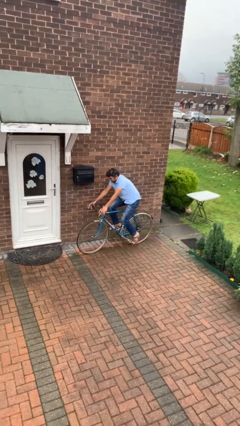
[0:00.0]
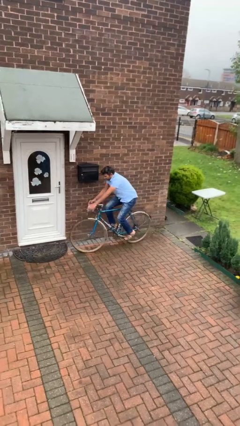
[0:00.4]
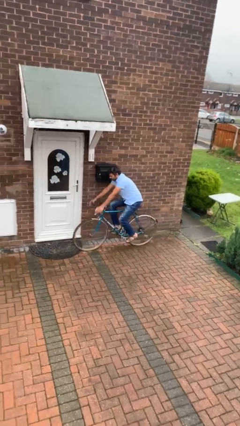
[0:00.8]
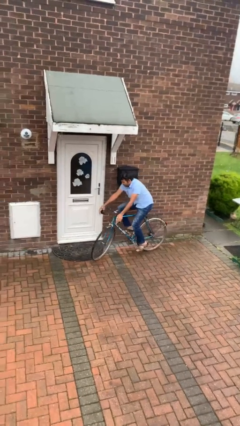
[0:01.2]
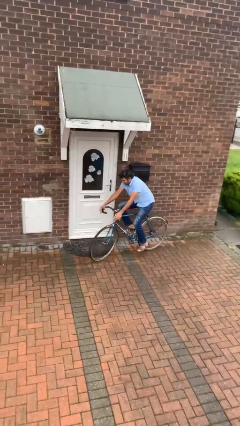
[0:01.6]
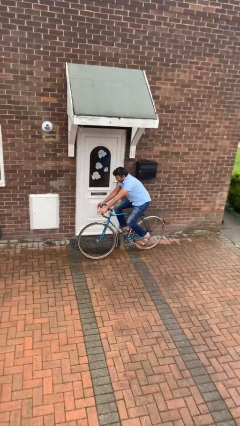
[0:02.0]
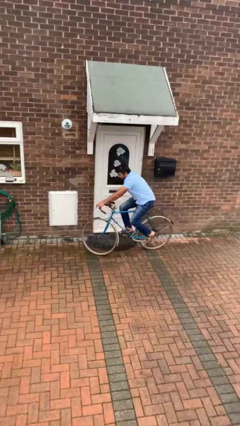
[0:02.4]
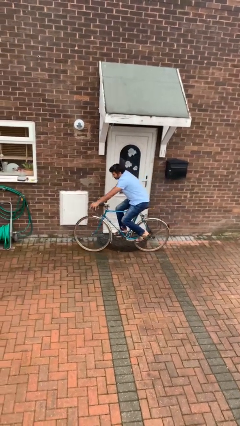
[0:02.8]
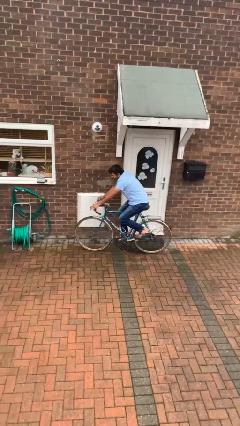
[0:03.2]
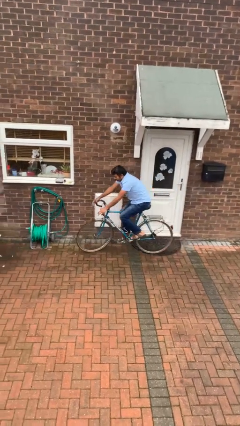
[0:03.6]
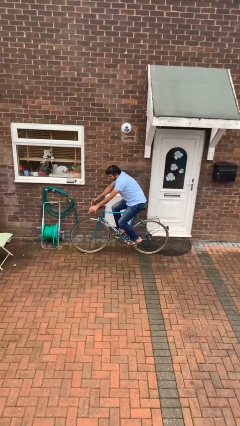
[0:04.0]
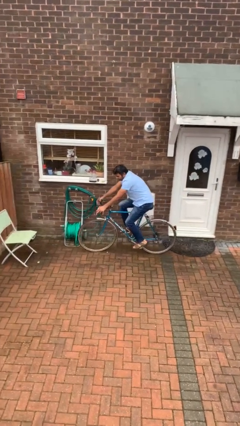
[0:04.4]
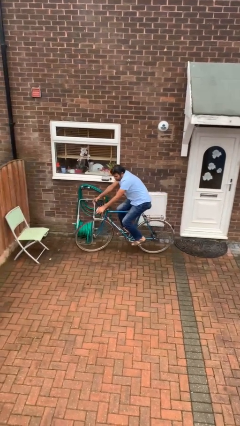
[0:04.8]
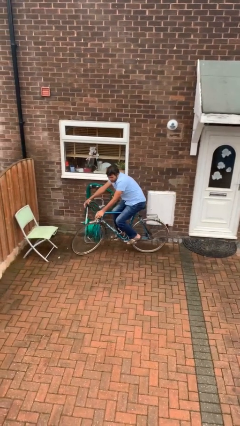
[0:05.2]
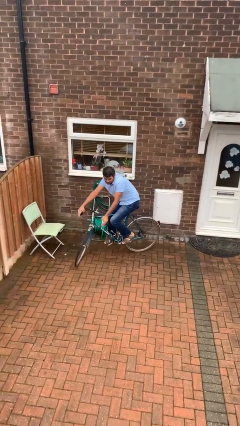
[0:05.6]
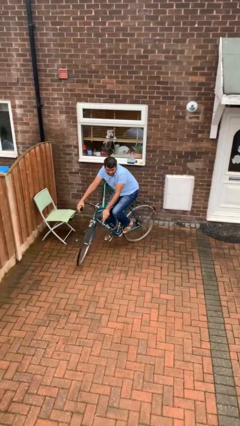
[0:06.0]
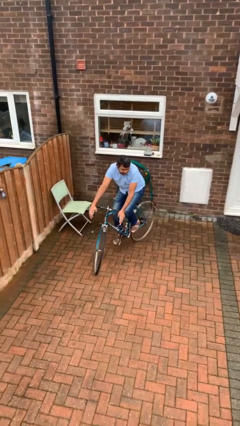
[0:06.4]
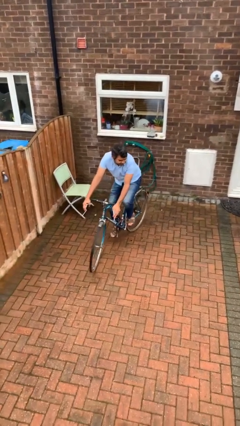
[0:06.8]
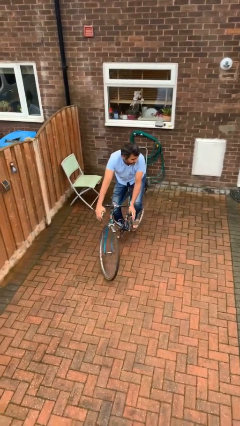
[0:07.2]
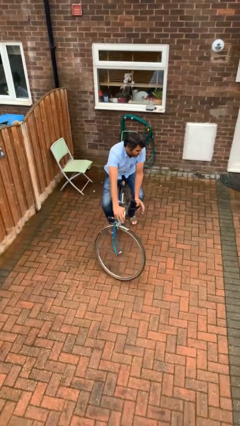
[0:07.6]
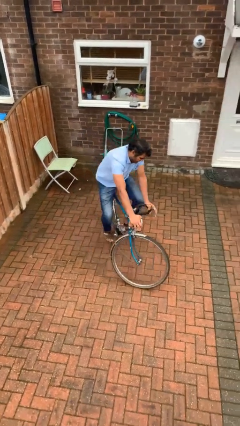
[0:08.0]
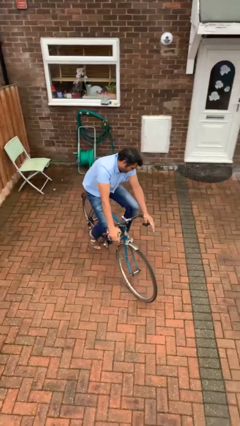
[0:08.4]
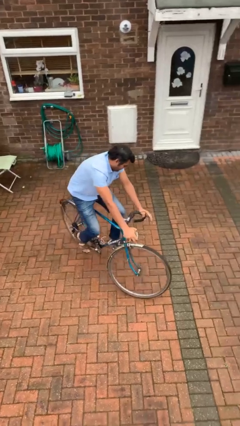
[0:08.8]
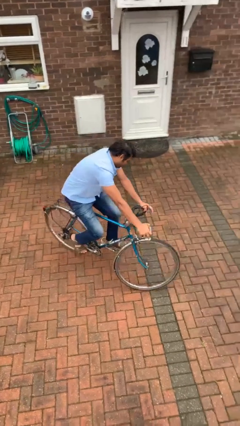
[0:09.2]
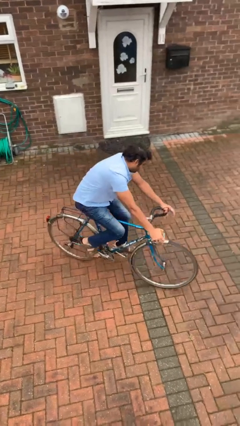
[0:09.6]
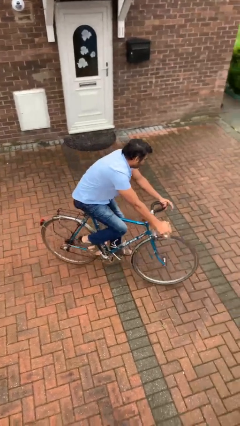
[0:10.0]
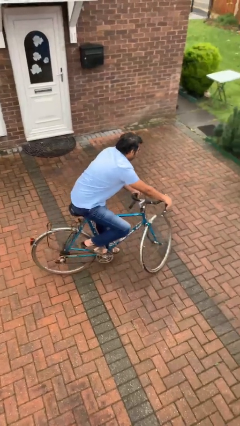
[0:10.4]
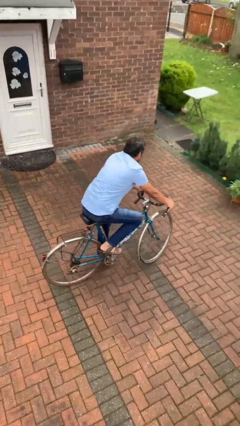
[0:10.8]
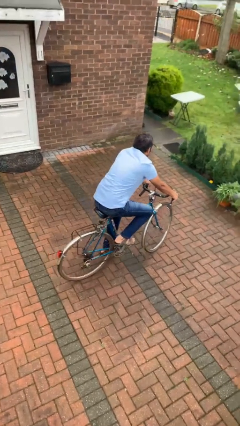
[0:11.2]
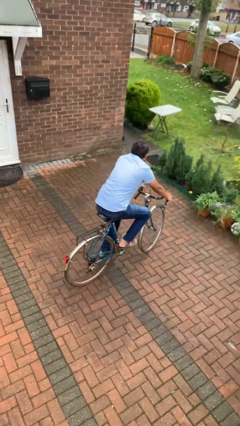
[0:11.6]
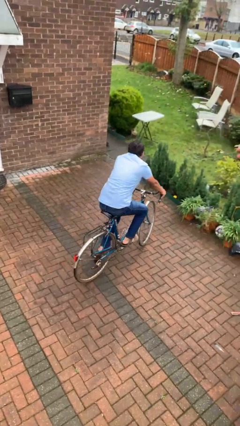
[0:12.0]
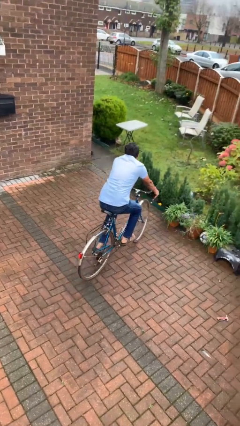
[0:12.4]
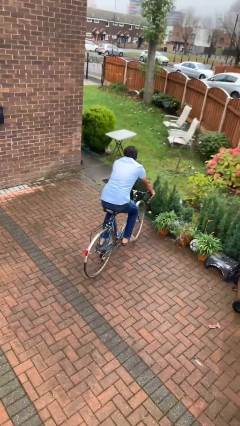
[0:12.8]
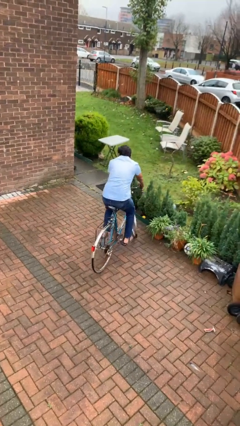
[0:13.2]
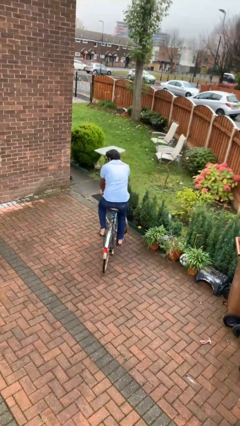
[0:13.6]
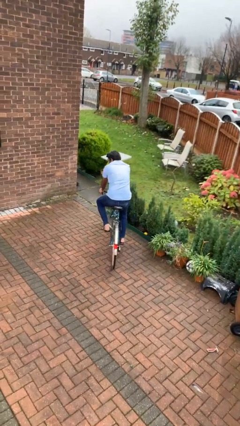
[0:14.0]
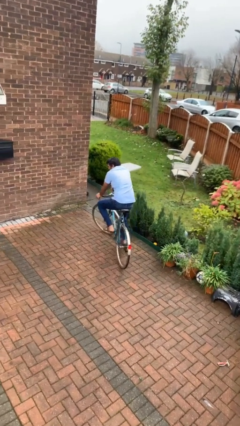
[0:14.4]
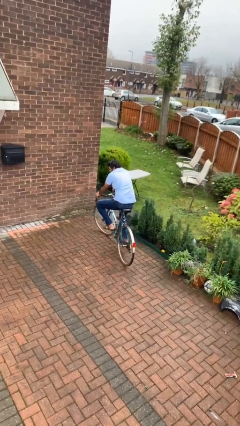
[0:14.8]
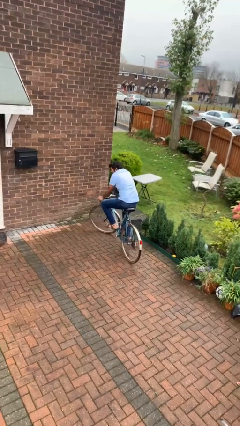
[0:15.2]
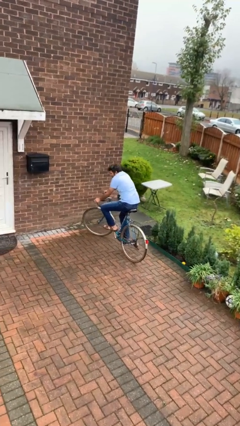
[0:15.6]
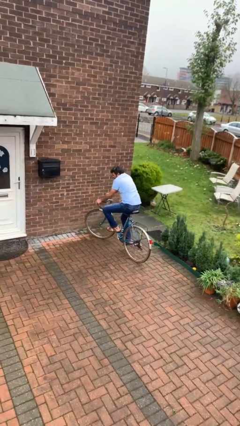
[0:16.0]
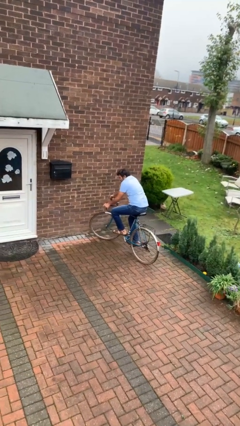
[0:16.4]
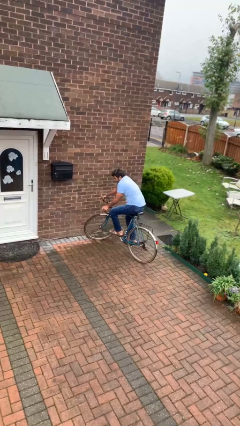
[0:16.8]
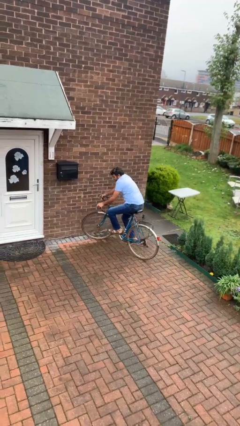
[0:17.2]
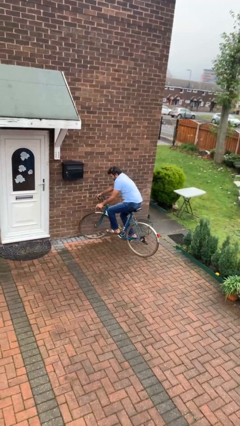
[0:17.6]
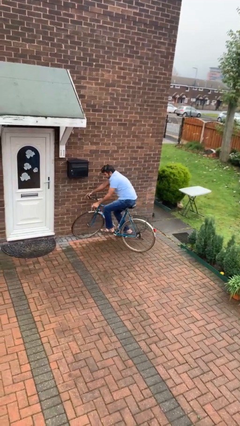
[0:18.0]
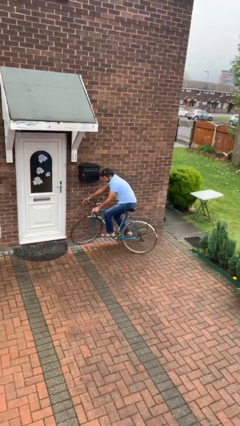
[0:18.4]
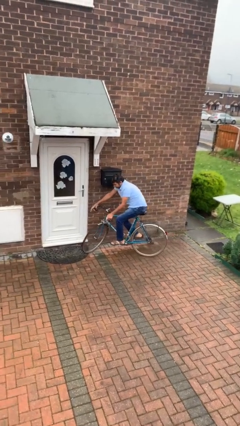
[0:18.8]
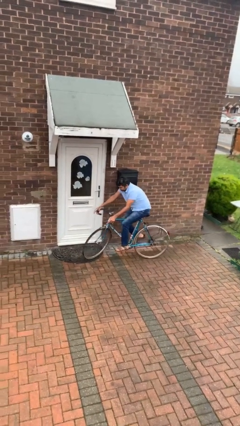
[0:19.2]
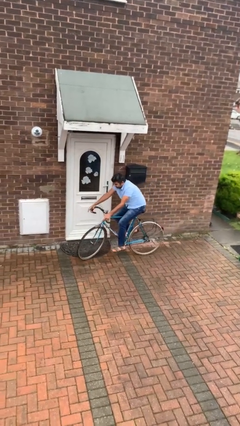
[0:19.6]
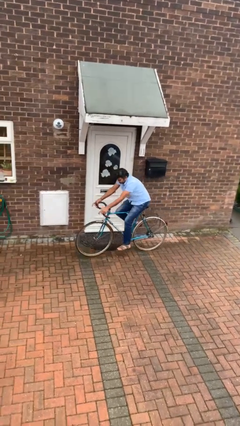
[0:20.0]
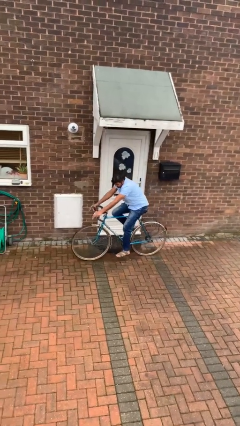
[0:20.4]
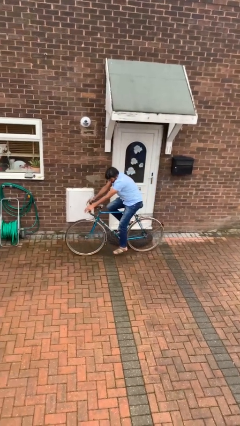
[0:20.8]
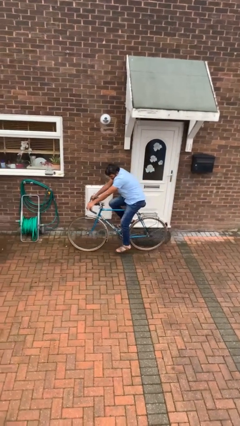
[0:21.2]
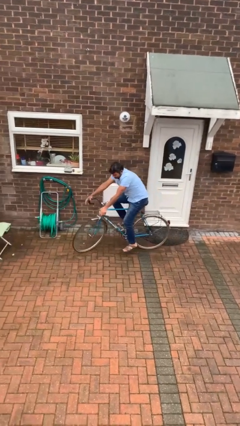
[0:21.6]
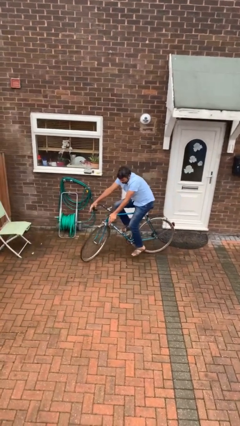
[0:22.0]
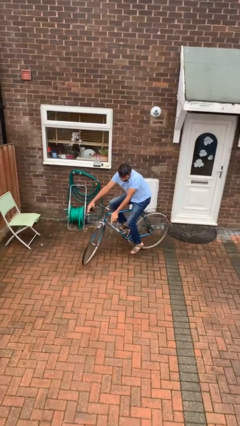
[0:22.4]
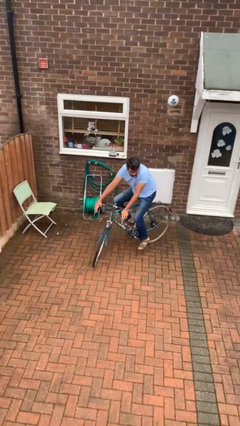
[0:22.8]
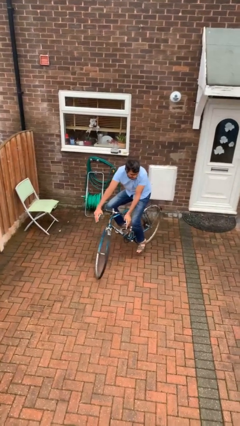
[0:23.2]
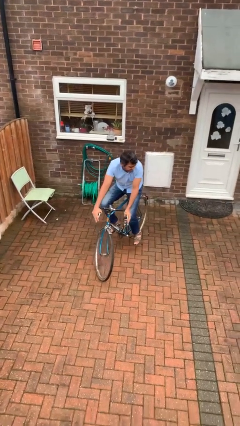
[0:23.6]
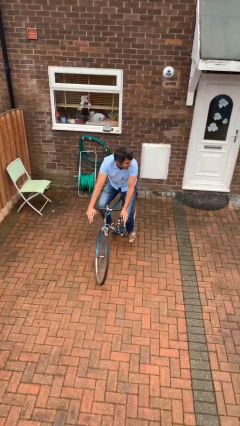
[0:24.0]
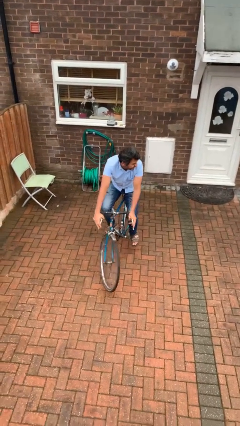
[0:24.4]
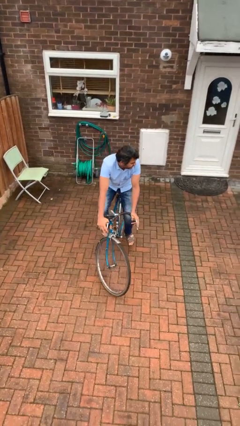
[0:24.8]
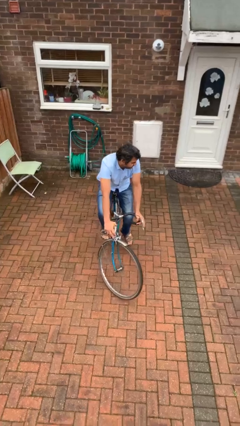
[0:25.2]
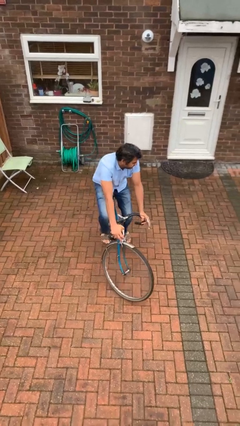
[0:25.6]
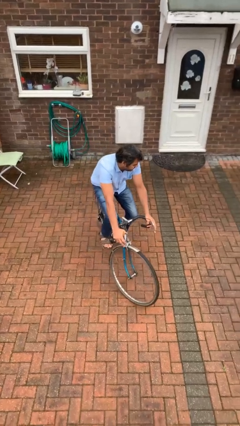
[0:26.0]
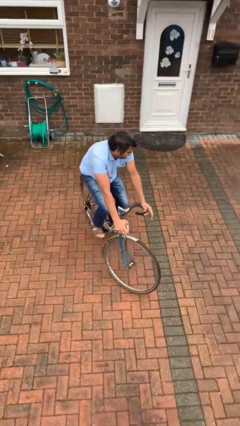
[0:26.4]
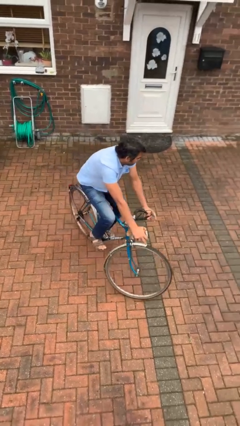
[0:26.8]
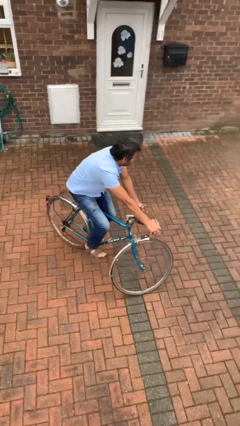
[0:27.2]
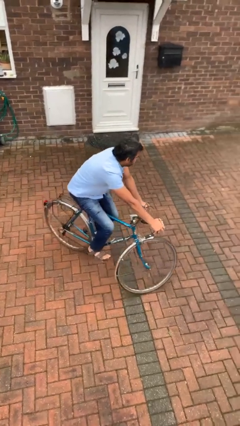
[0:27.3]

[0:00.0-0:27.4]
person rides bicycle

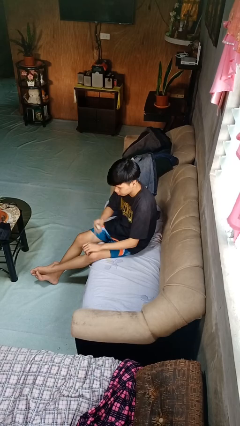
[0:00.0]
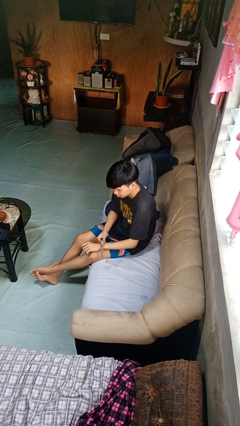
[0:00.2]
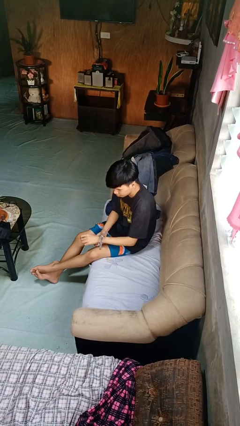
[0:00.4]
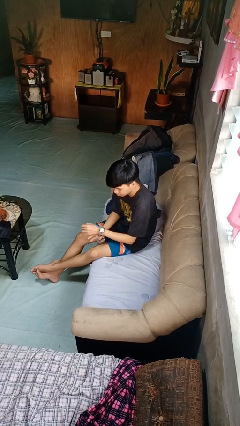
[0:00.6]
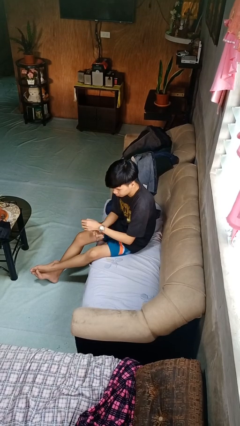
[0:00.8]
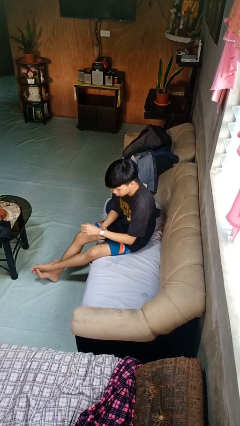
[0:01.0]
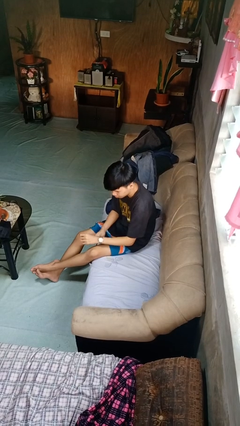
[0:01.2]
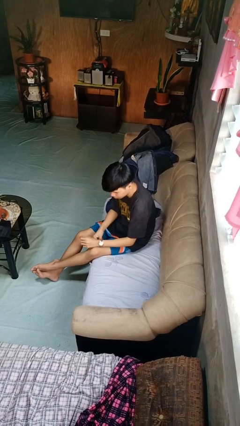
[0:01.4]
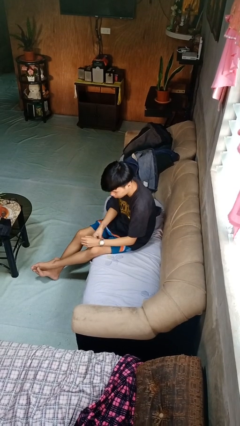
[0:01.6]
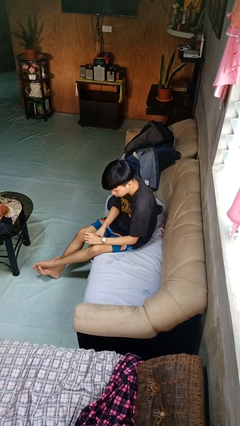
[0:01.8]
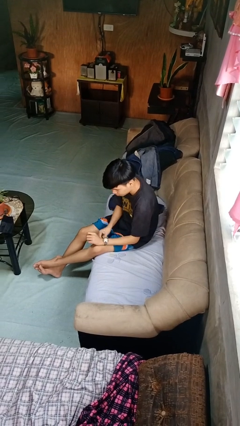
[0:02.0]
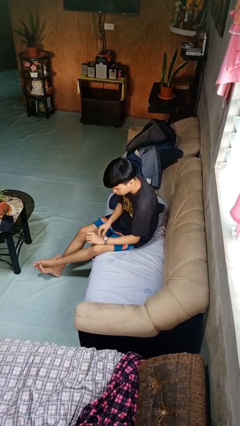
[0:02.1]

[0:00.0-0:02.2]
person puts on wristwatch

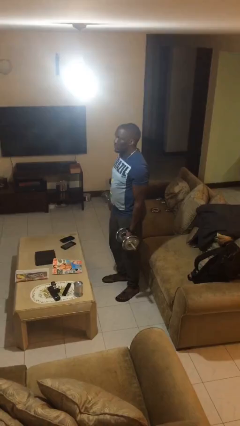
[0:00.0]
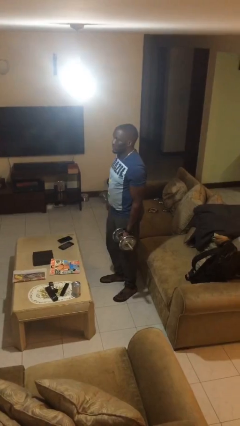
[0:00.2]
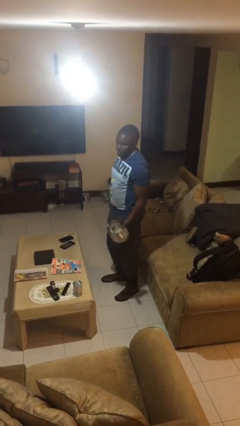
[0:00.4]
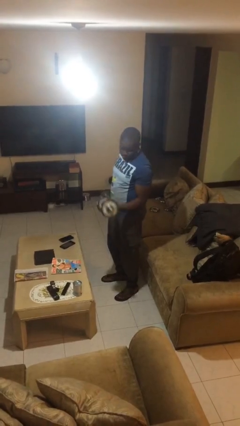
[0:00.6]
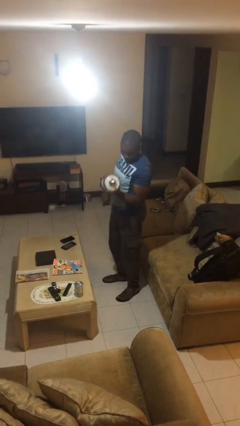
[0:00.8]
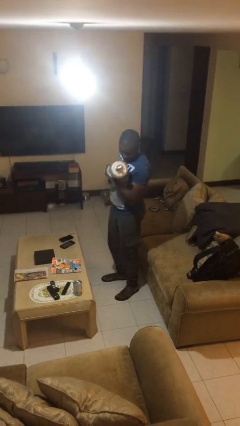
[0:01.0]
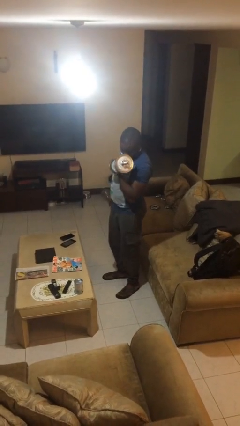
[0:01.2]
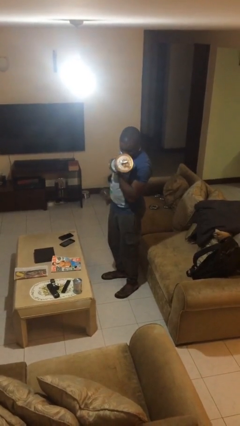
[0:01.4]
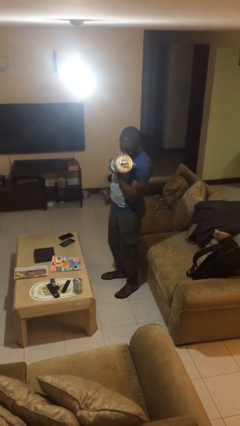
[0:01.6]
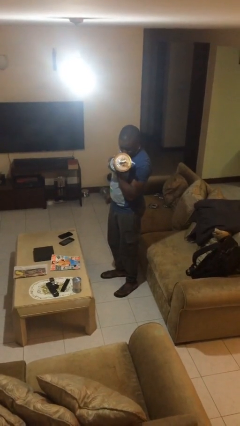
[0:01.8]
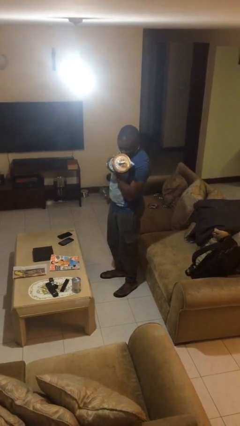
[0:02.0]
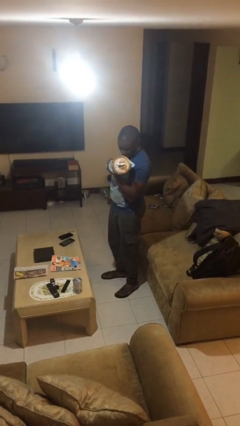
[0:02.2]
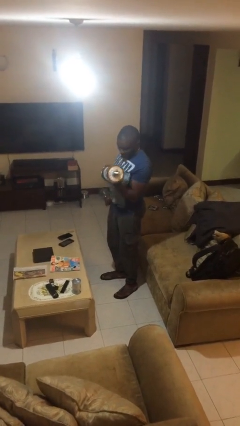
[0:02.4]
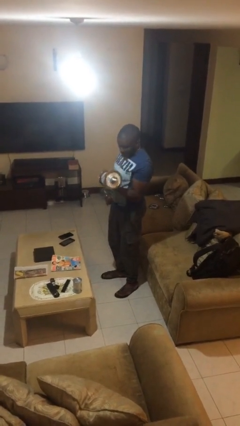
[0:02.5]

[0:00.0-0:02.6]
person lifts dumbbells
